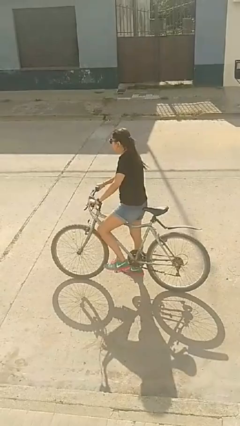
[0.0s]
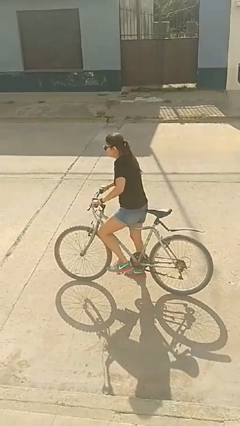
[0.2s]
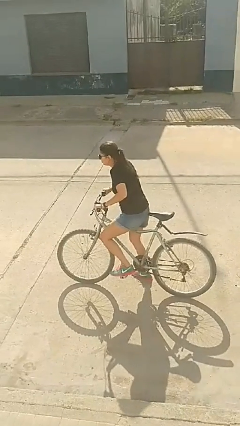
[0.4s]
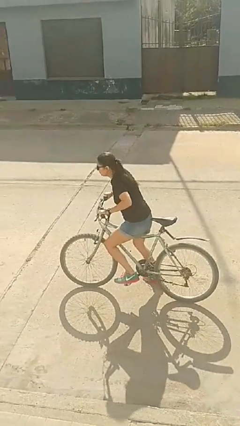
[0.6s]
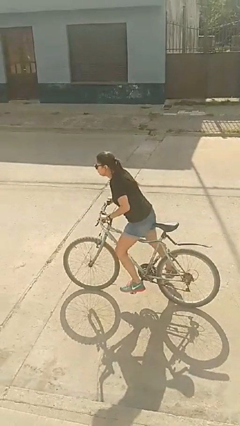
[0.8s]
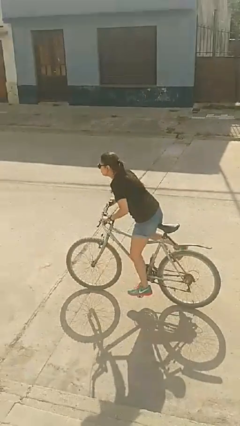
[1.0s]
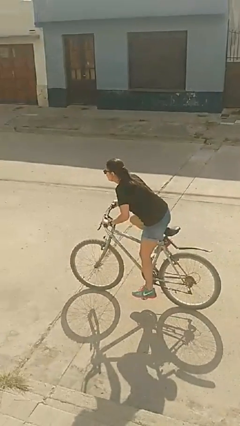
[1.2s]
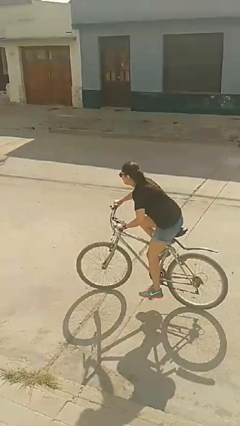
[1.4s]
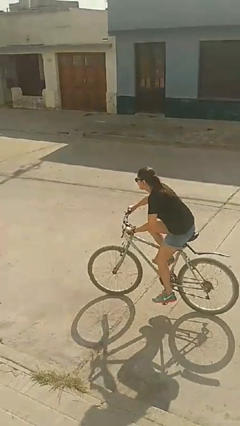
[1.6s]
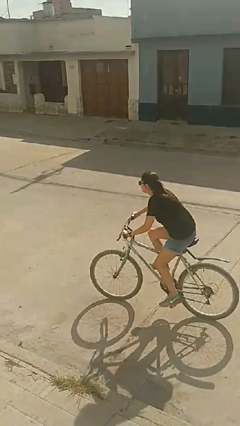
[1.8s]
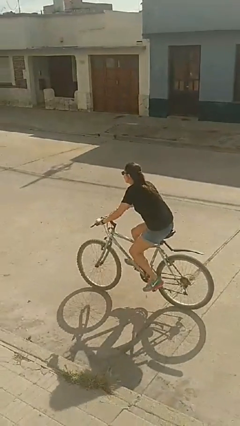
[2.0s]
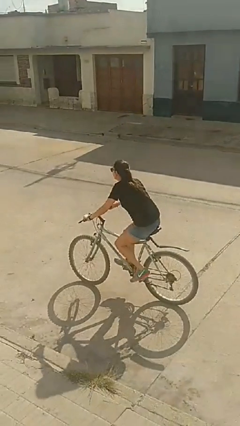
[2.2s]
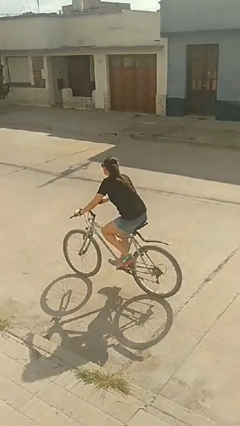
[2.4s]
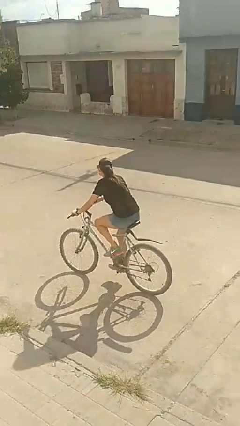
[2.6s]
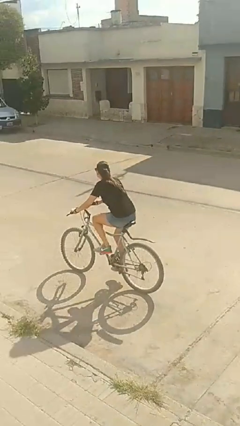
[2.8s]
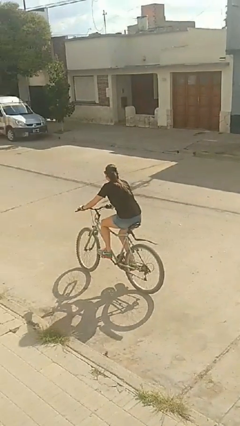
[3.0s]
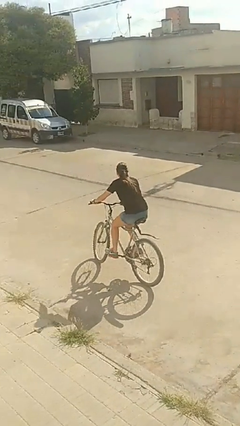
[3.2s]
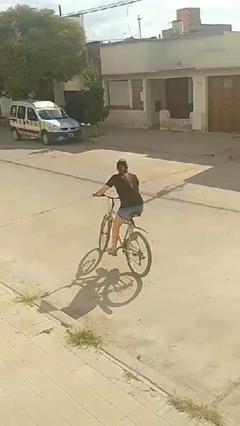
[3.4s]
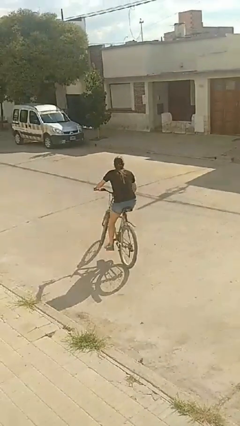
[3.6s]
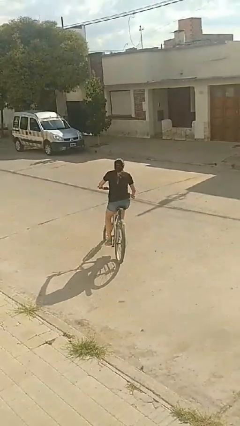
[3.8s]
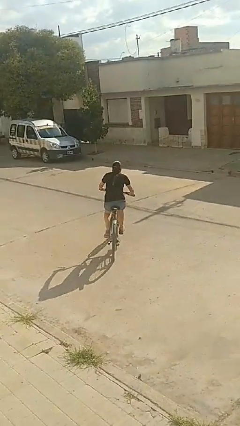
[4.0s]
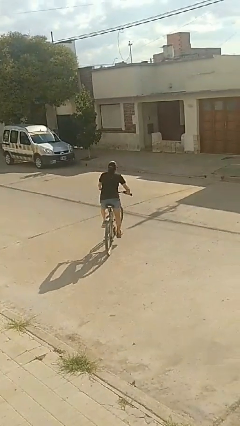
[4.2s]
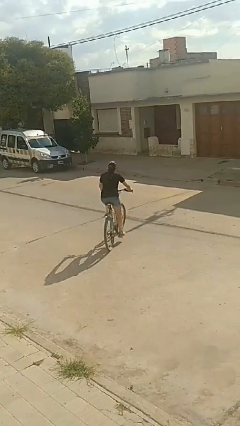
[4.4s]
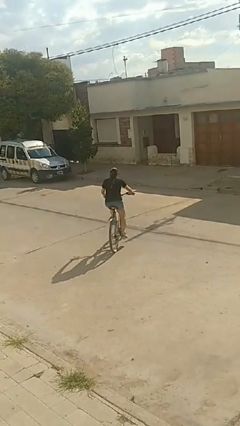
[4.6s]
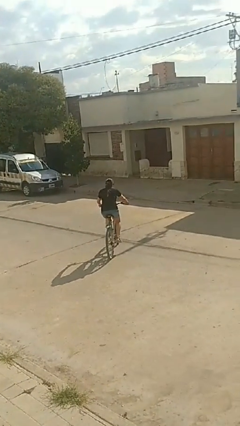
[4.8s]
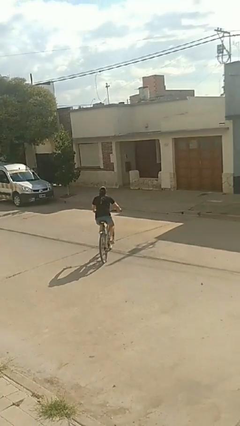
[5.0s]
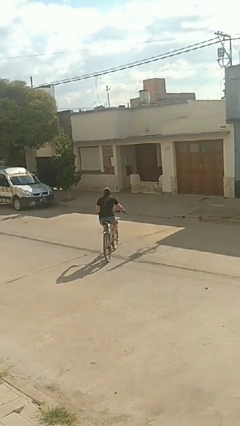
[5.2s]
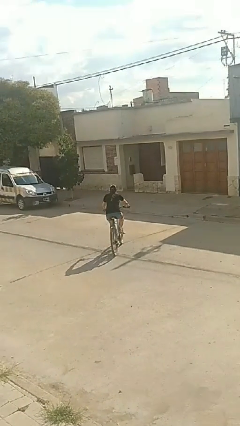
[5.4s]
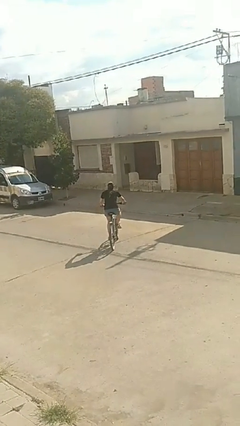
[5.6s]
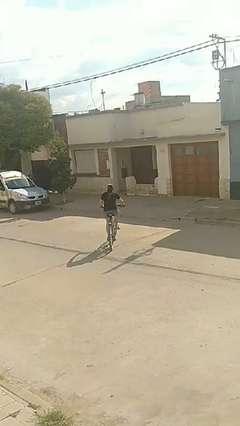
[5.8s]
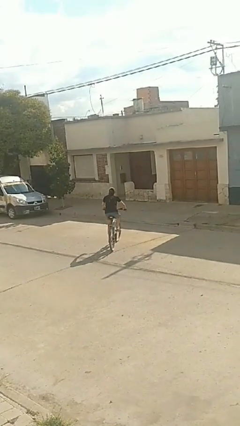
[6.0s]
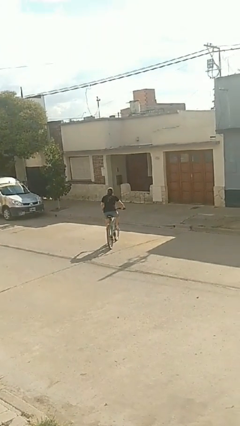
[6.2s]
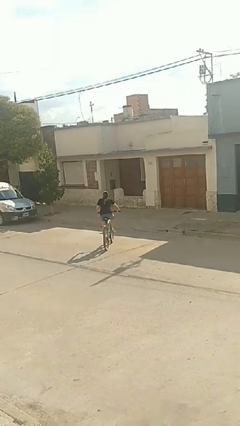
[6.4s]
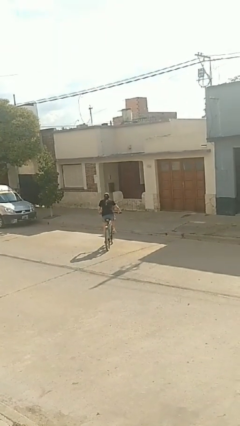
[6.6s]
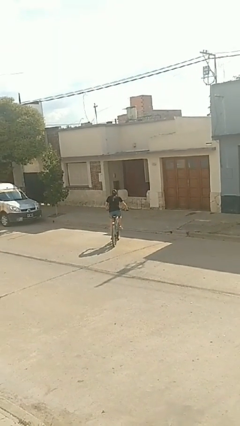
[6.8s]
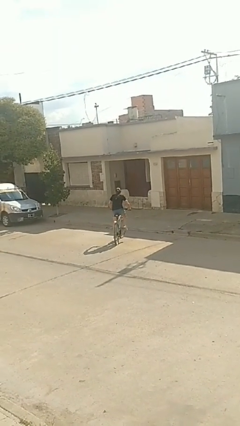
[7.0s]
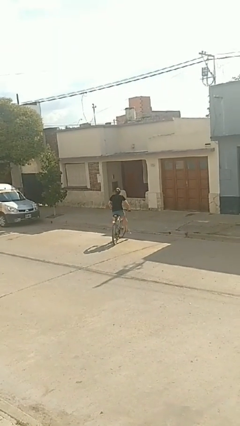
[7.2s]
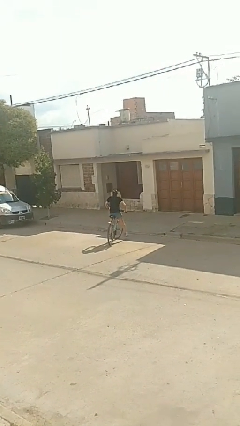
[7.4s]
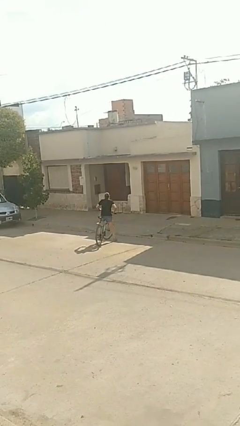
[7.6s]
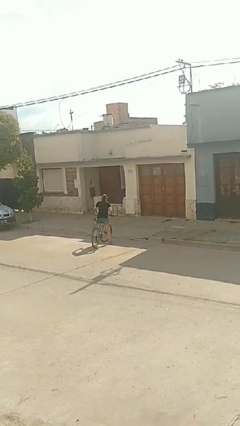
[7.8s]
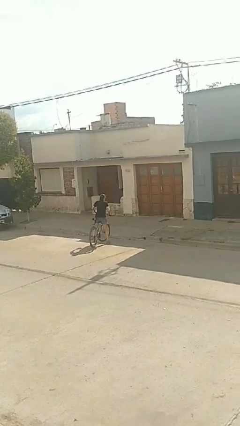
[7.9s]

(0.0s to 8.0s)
person rides bicycle

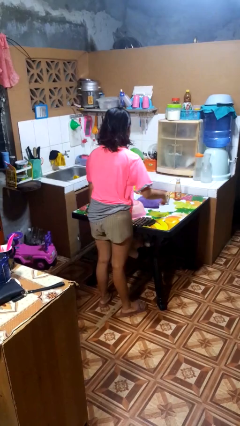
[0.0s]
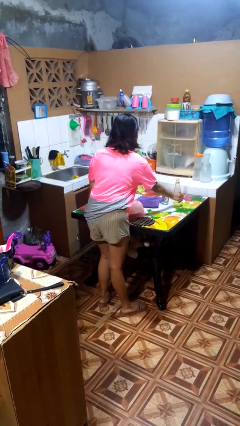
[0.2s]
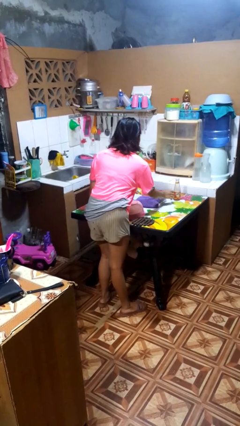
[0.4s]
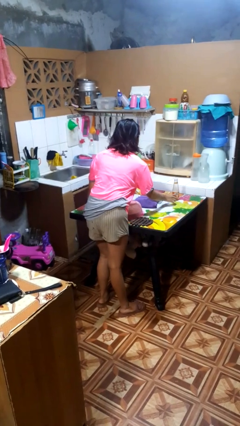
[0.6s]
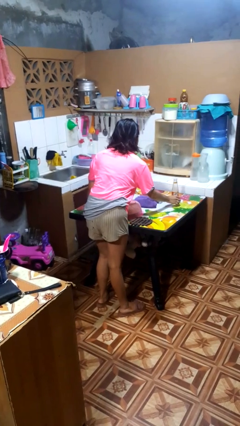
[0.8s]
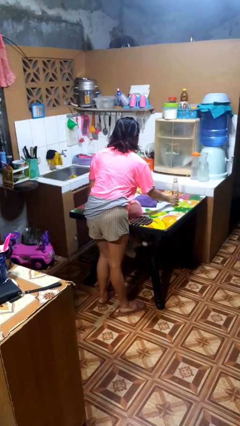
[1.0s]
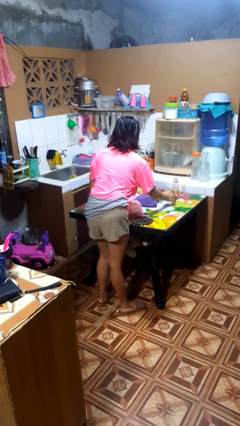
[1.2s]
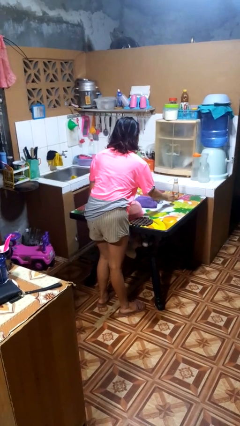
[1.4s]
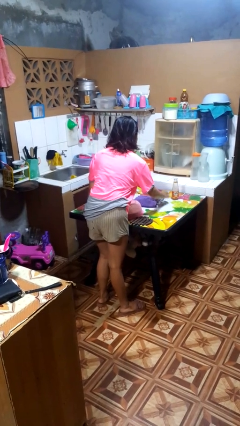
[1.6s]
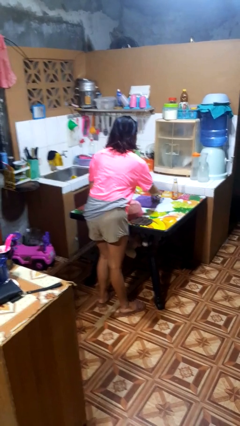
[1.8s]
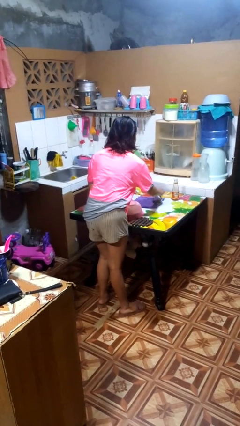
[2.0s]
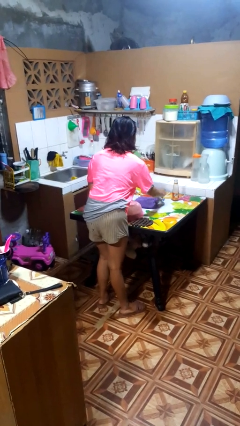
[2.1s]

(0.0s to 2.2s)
person knocks over glass

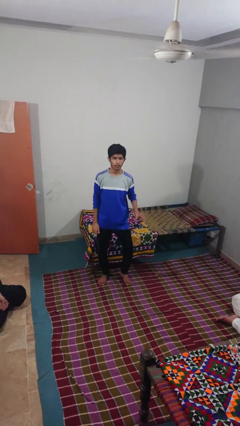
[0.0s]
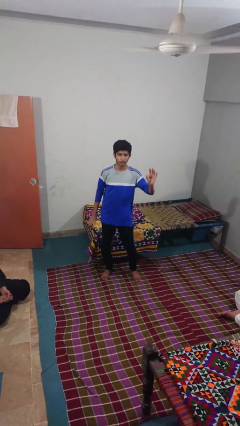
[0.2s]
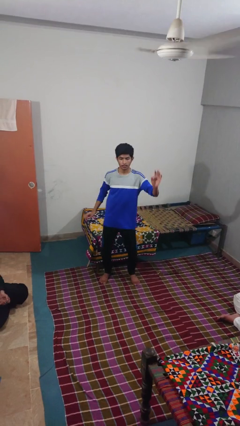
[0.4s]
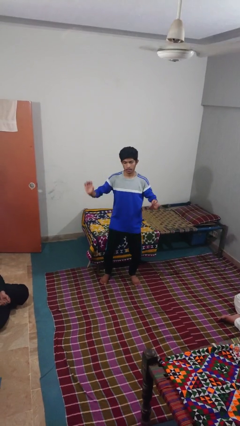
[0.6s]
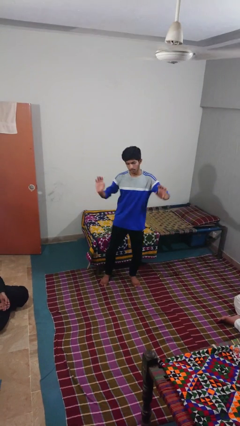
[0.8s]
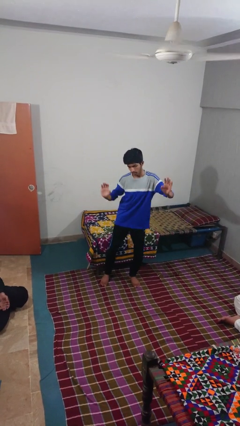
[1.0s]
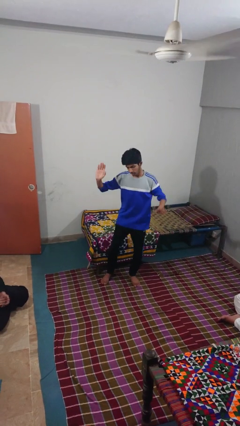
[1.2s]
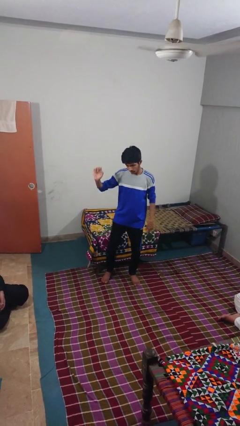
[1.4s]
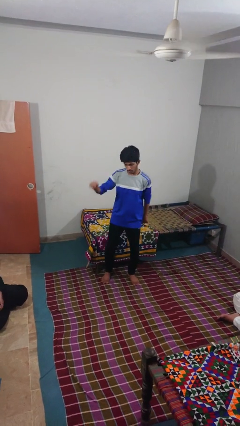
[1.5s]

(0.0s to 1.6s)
person dances in place

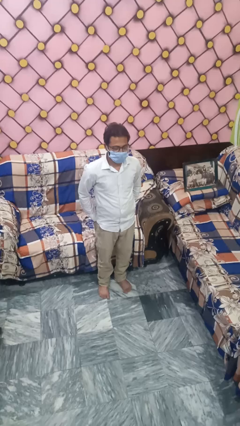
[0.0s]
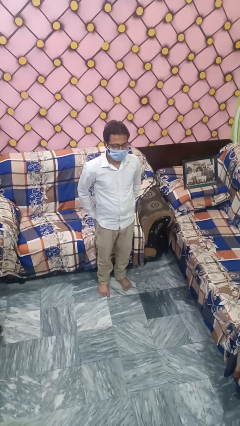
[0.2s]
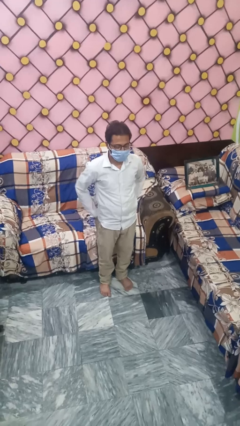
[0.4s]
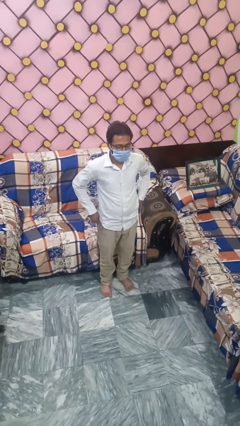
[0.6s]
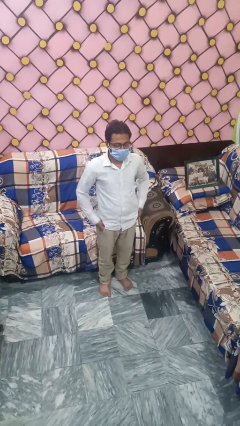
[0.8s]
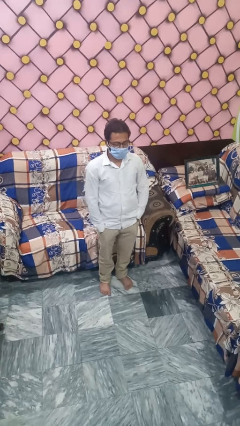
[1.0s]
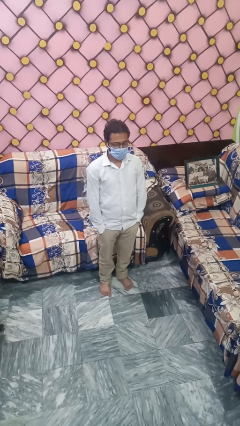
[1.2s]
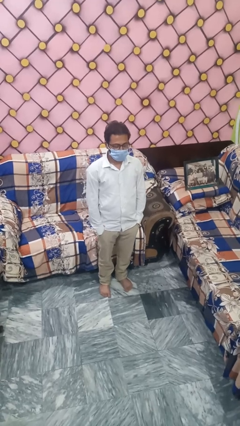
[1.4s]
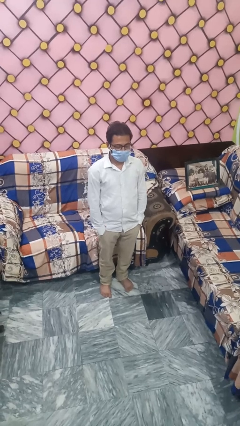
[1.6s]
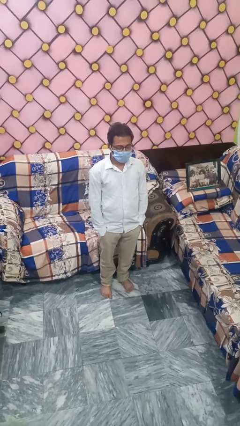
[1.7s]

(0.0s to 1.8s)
person puts hands in back pockets

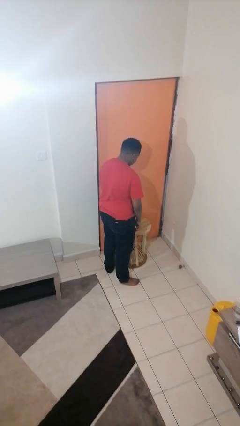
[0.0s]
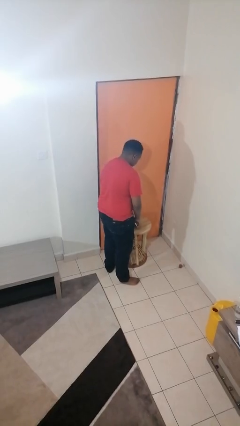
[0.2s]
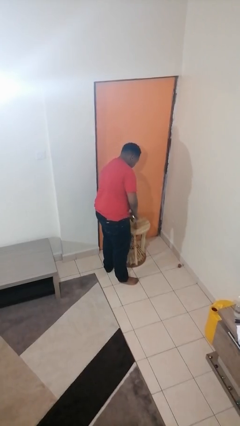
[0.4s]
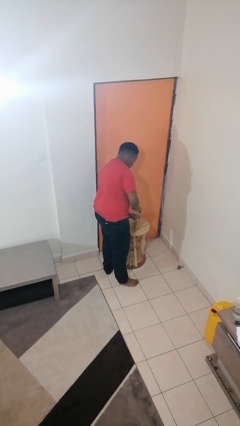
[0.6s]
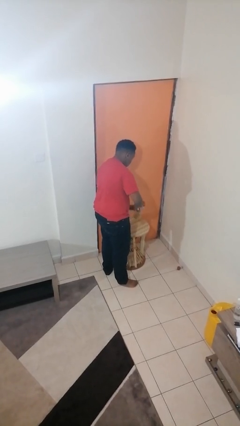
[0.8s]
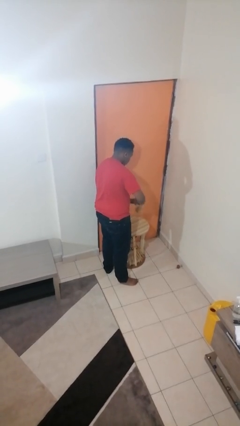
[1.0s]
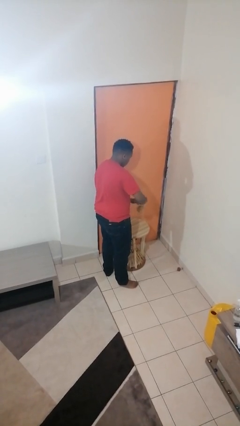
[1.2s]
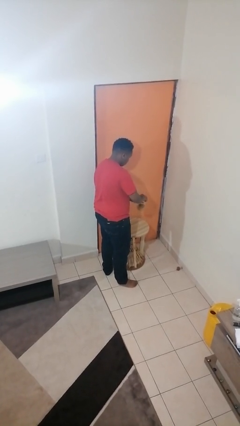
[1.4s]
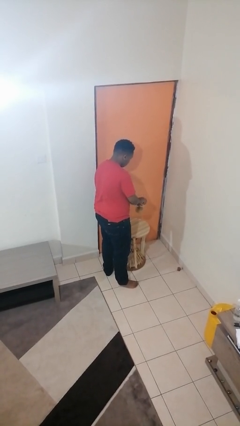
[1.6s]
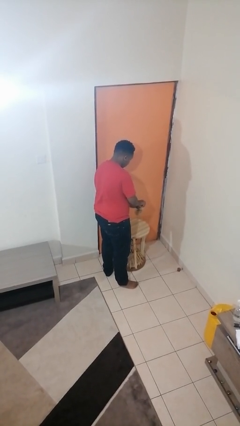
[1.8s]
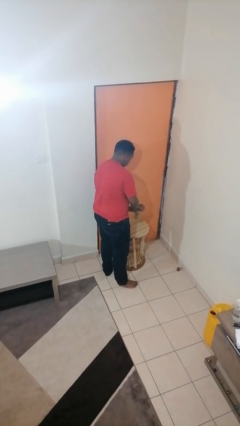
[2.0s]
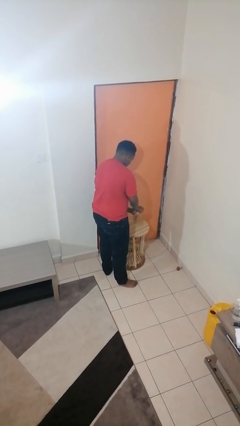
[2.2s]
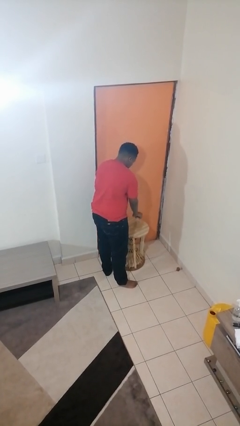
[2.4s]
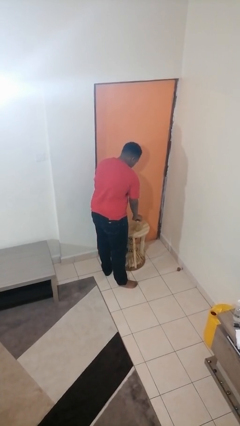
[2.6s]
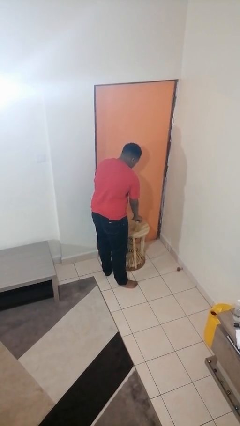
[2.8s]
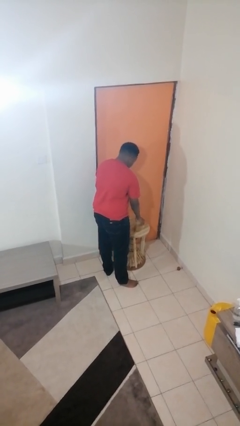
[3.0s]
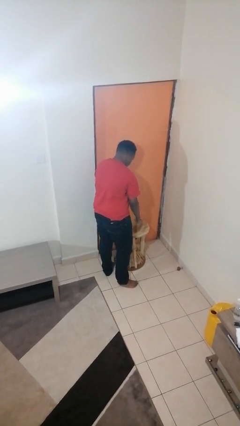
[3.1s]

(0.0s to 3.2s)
person closes jar

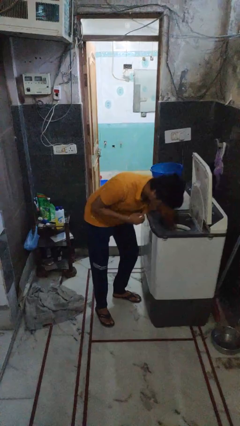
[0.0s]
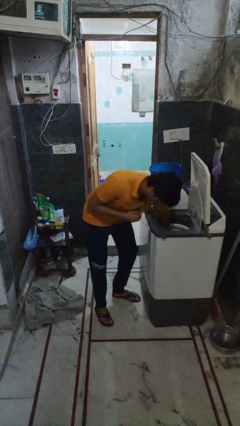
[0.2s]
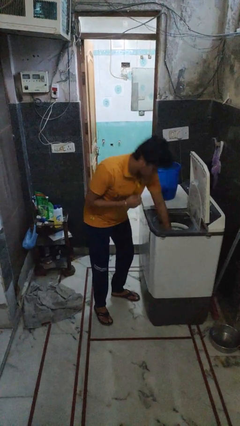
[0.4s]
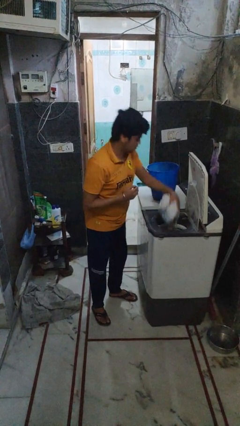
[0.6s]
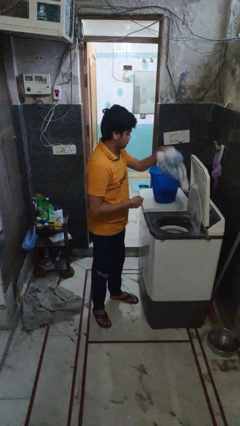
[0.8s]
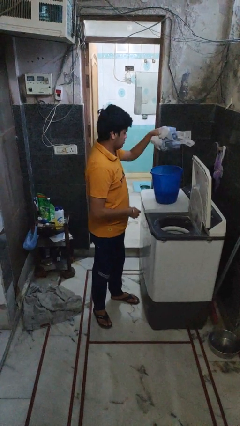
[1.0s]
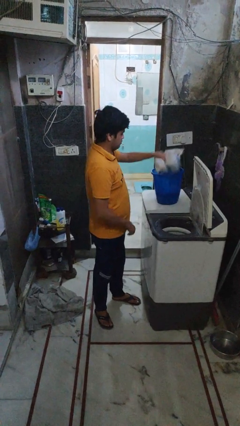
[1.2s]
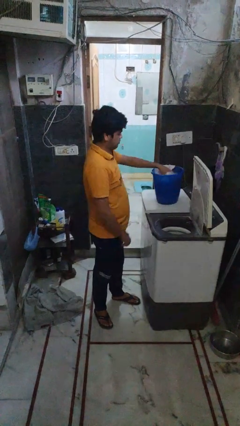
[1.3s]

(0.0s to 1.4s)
person unloads clotheswasher
